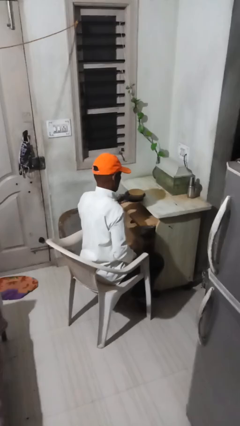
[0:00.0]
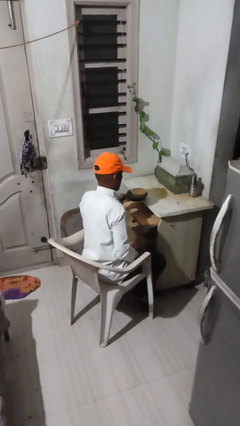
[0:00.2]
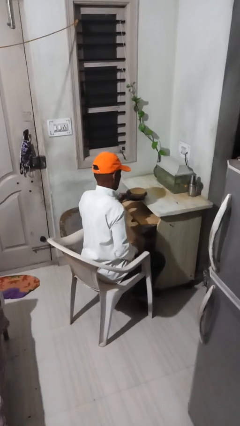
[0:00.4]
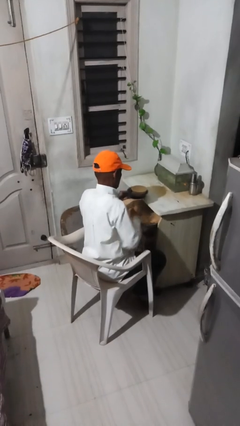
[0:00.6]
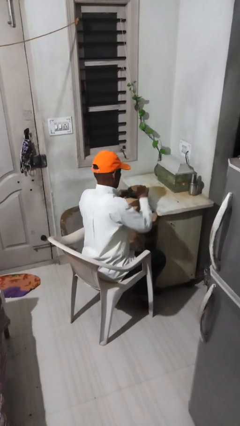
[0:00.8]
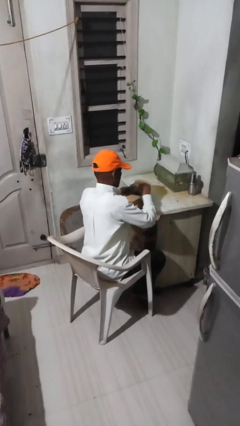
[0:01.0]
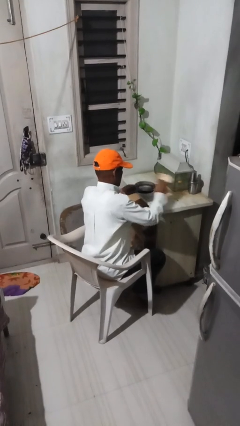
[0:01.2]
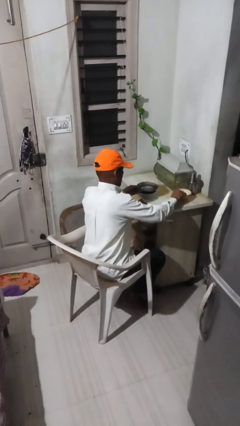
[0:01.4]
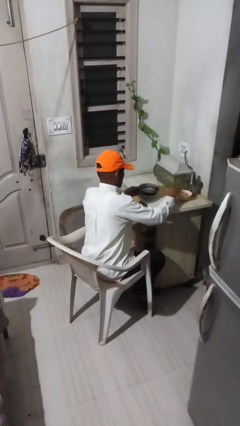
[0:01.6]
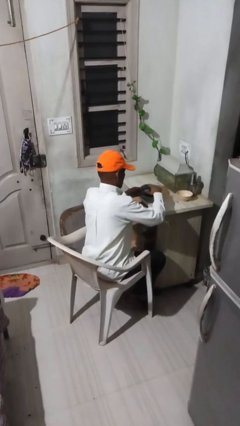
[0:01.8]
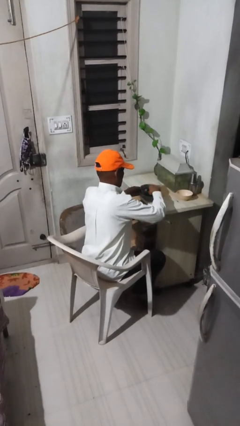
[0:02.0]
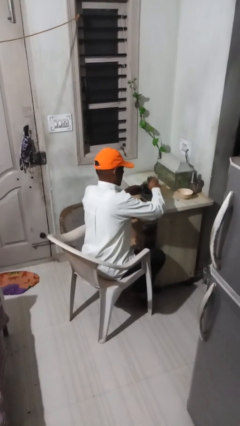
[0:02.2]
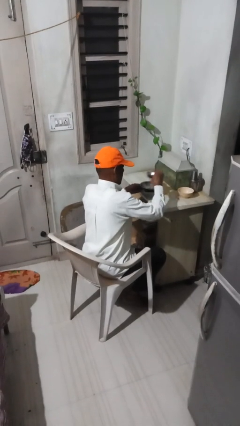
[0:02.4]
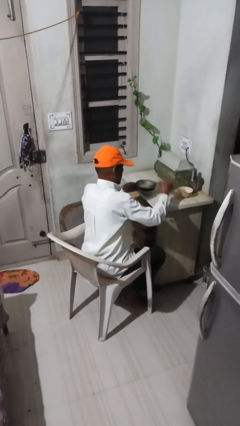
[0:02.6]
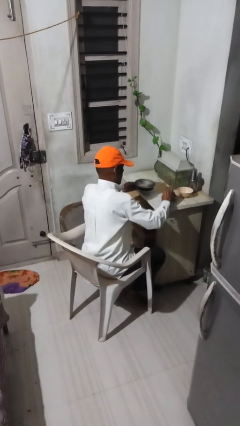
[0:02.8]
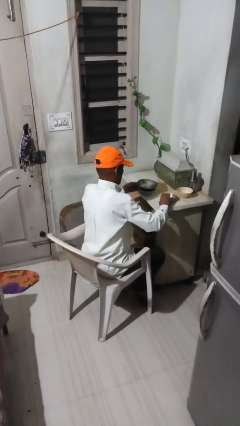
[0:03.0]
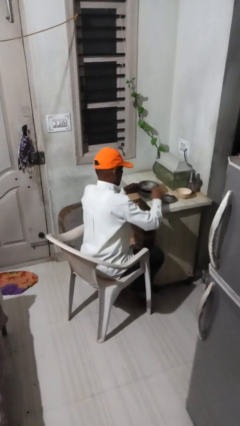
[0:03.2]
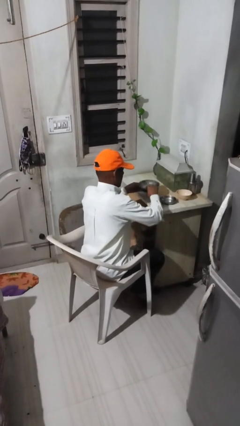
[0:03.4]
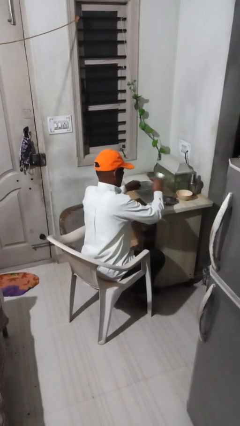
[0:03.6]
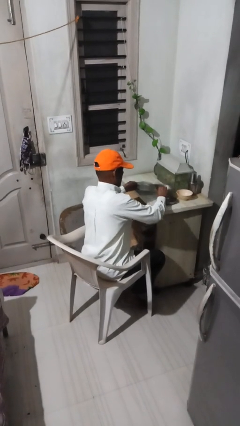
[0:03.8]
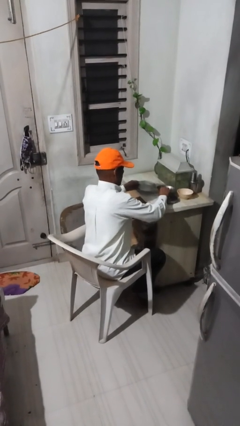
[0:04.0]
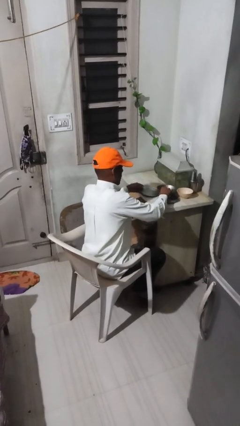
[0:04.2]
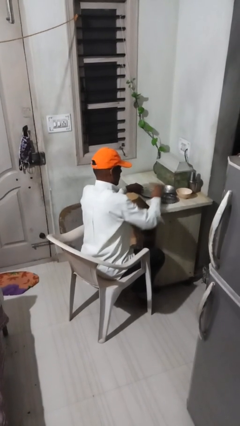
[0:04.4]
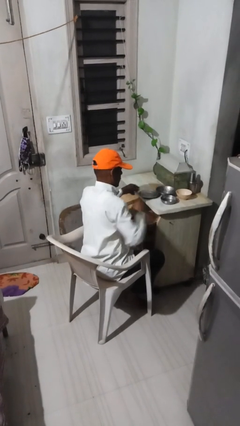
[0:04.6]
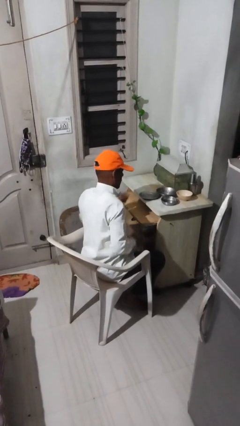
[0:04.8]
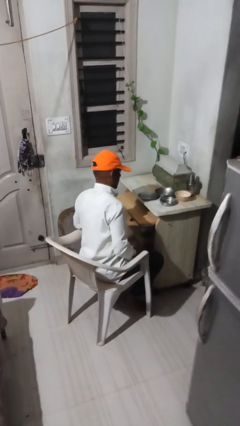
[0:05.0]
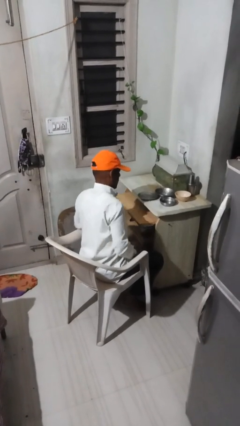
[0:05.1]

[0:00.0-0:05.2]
person sets table

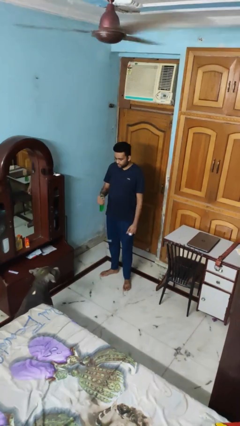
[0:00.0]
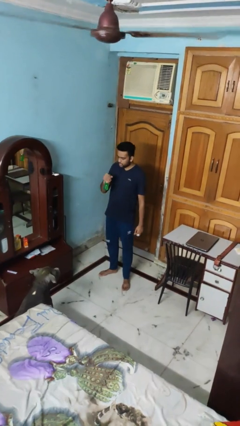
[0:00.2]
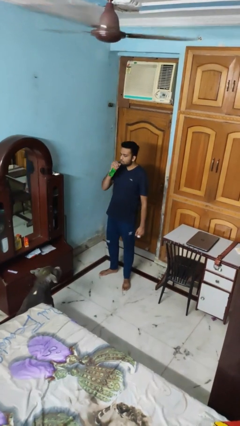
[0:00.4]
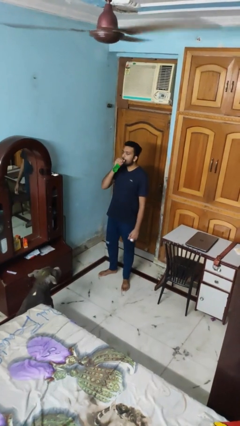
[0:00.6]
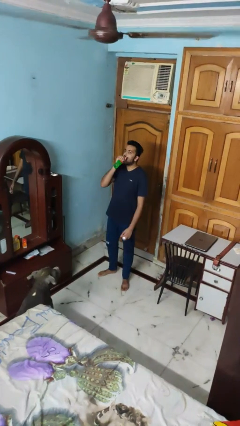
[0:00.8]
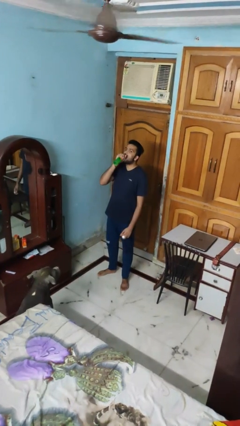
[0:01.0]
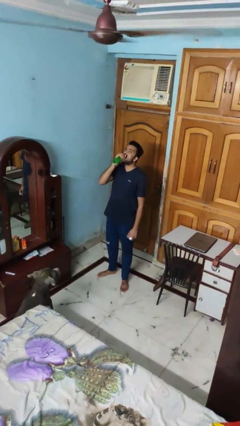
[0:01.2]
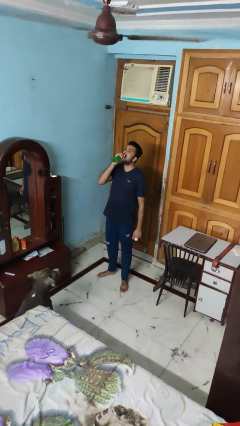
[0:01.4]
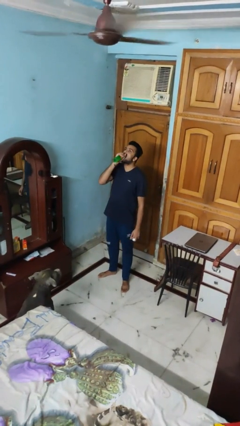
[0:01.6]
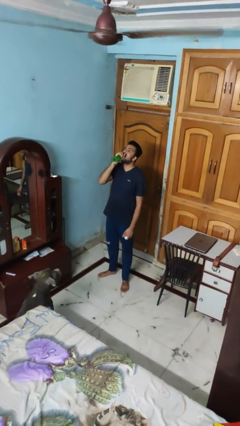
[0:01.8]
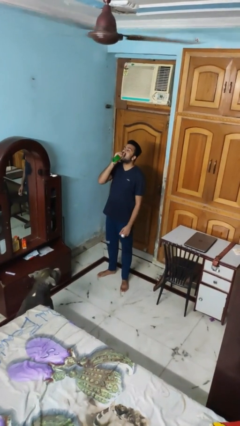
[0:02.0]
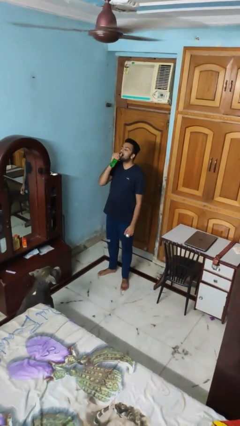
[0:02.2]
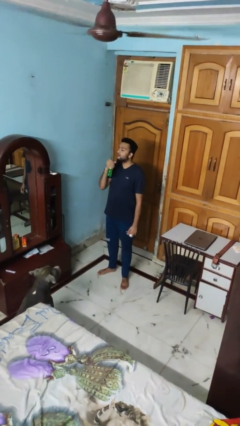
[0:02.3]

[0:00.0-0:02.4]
person drinks from bottle

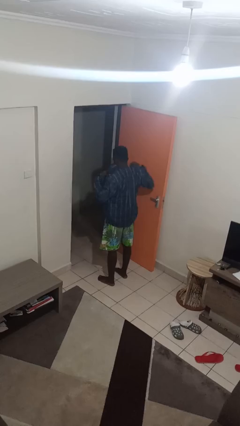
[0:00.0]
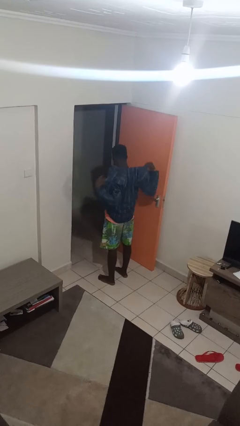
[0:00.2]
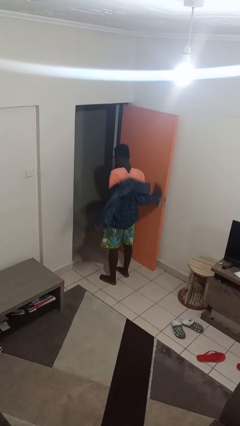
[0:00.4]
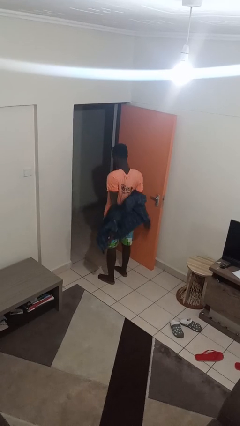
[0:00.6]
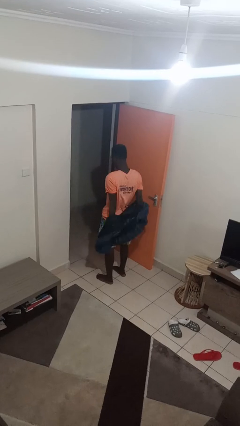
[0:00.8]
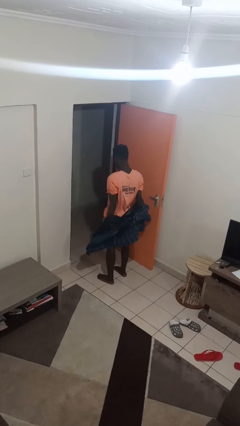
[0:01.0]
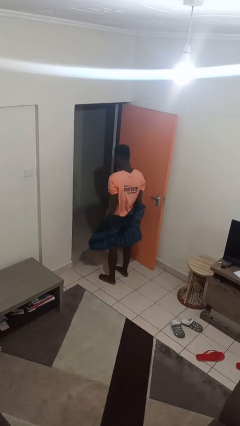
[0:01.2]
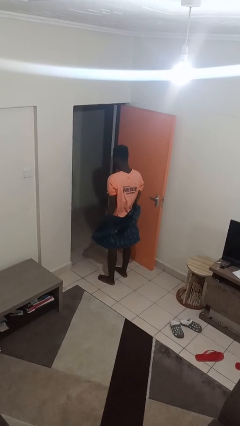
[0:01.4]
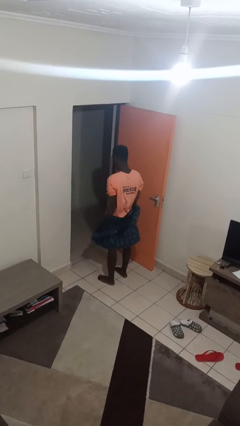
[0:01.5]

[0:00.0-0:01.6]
person takes off jacket

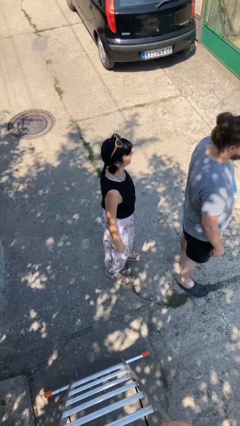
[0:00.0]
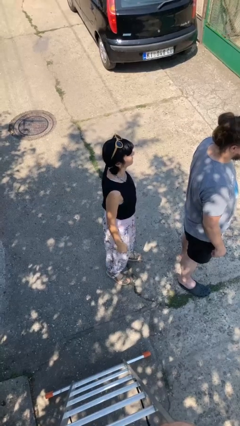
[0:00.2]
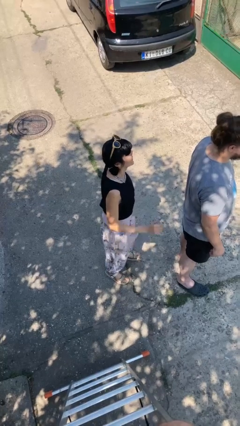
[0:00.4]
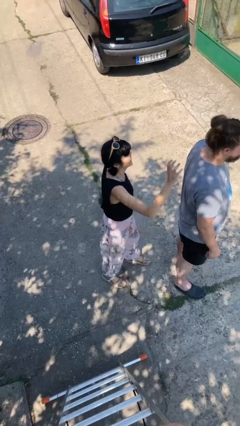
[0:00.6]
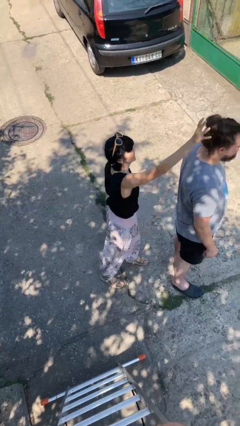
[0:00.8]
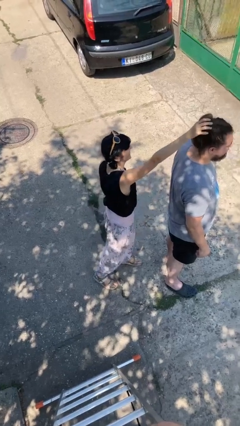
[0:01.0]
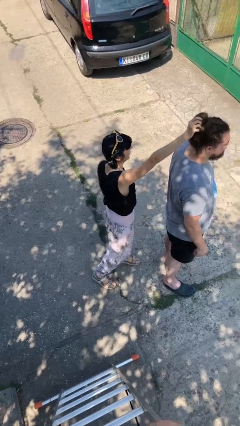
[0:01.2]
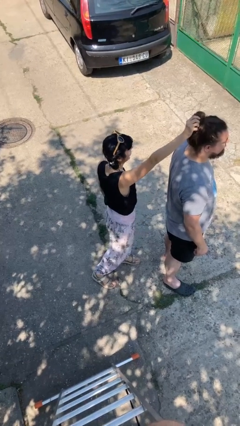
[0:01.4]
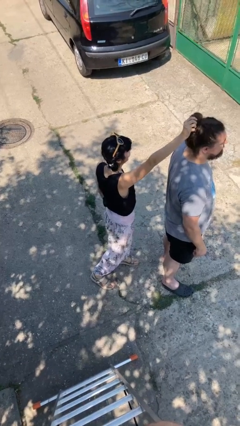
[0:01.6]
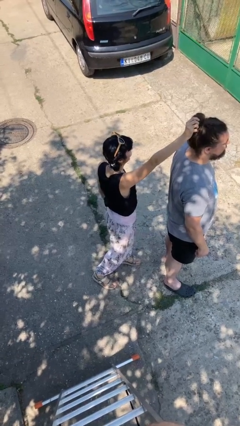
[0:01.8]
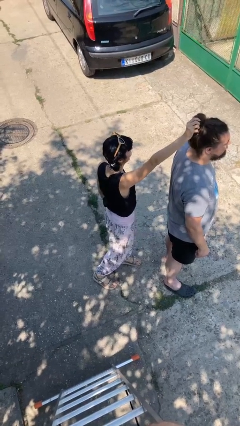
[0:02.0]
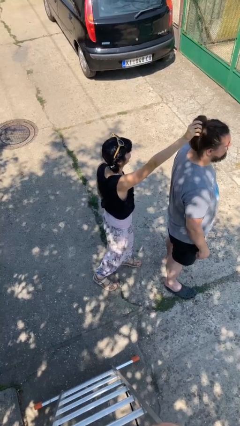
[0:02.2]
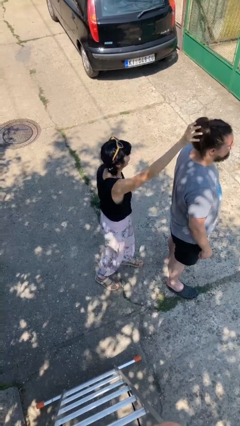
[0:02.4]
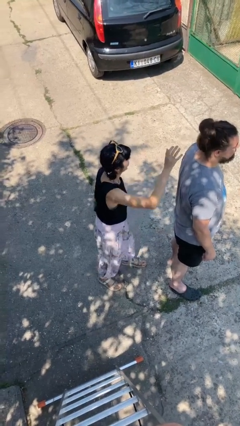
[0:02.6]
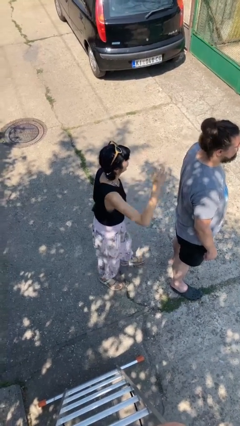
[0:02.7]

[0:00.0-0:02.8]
person grabs person by hair

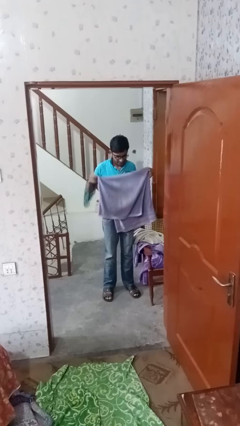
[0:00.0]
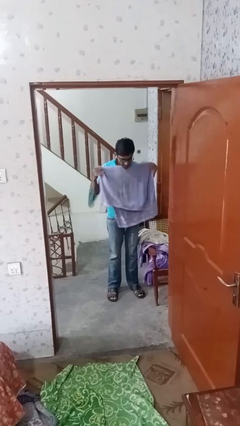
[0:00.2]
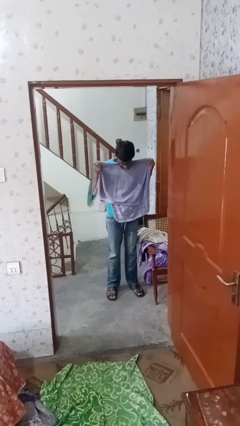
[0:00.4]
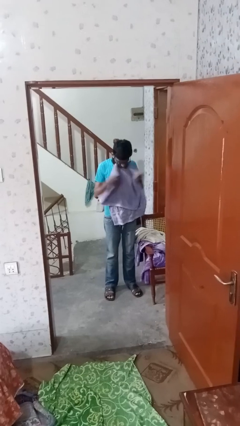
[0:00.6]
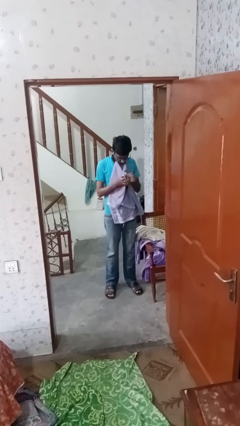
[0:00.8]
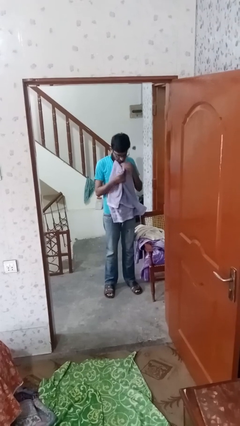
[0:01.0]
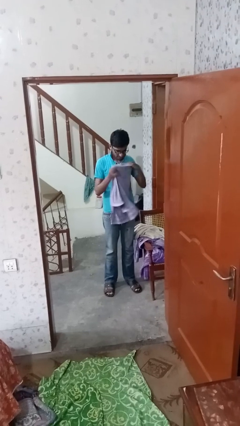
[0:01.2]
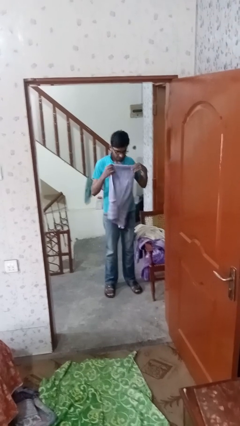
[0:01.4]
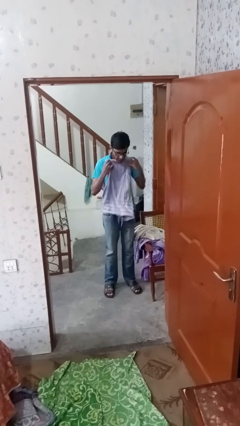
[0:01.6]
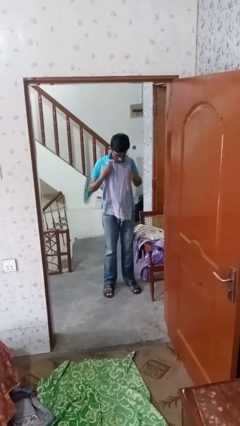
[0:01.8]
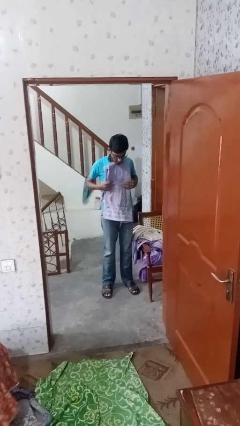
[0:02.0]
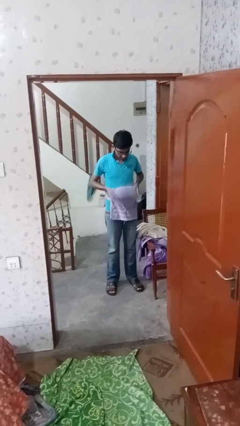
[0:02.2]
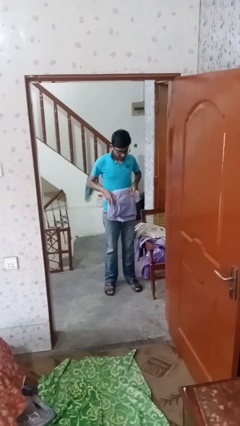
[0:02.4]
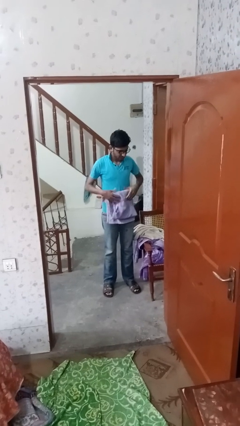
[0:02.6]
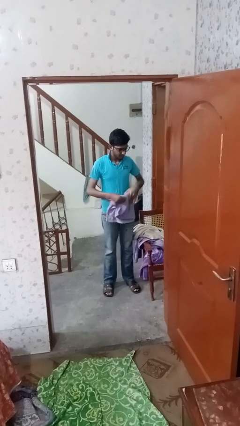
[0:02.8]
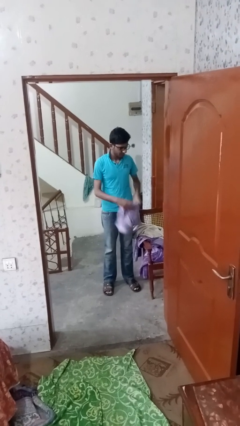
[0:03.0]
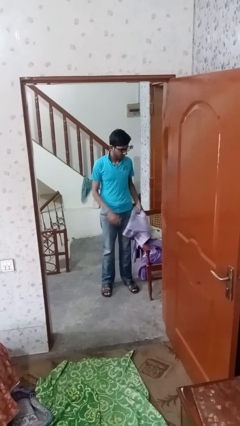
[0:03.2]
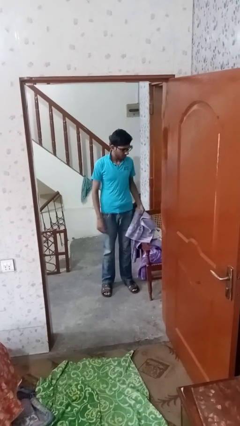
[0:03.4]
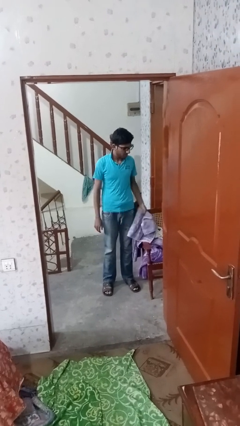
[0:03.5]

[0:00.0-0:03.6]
person folds towel

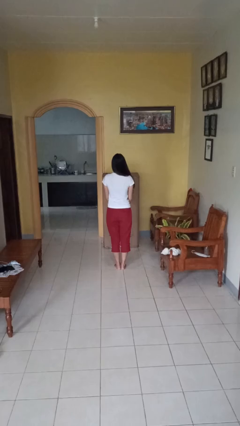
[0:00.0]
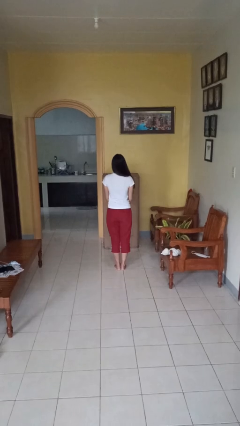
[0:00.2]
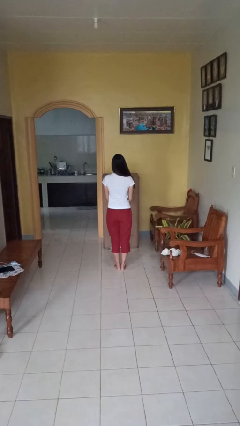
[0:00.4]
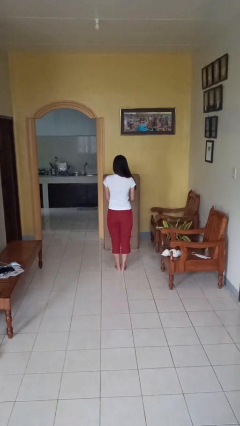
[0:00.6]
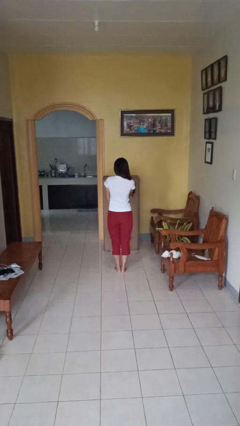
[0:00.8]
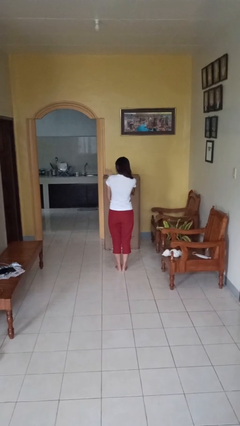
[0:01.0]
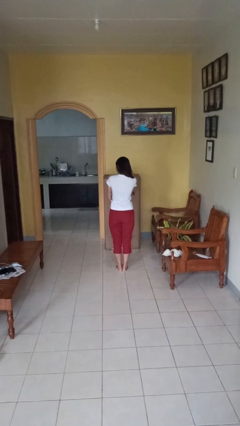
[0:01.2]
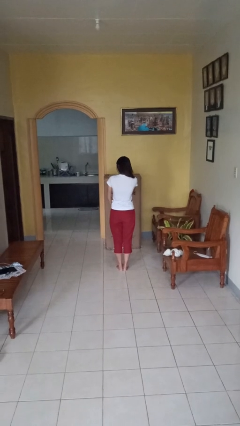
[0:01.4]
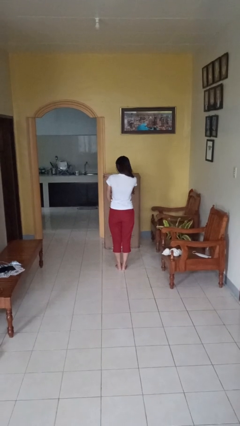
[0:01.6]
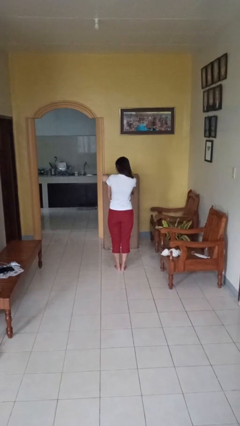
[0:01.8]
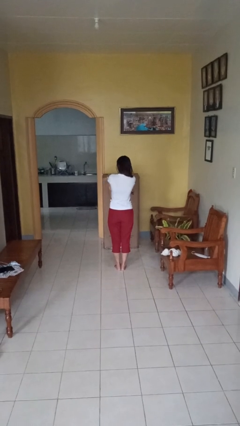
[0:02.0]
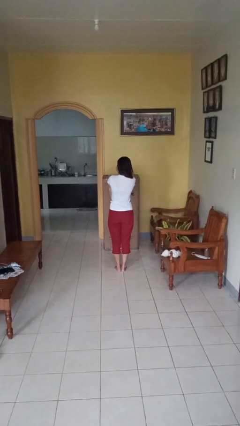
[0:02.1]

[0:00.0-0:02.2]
person swats bug
